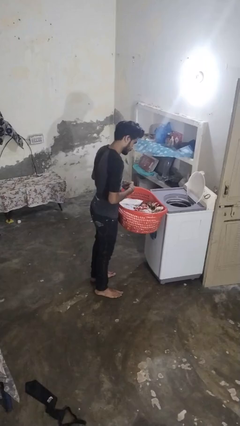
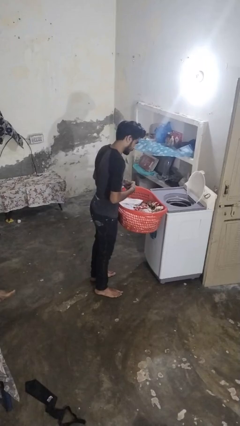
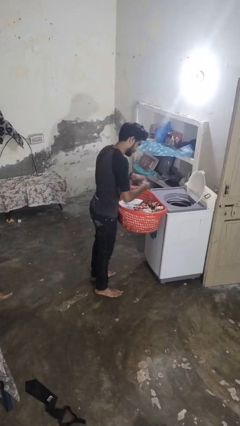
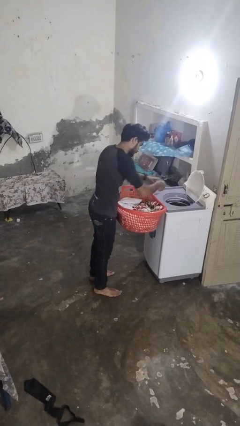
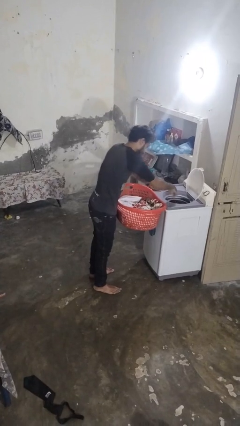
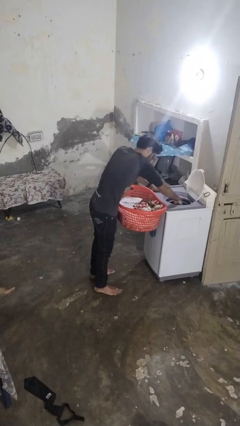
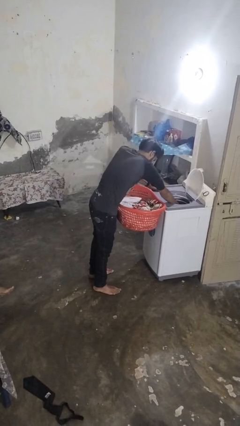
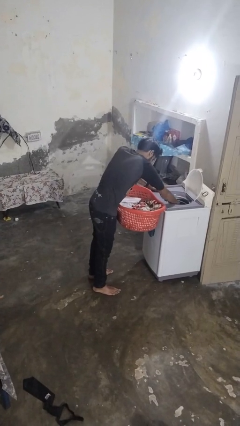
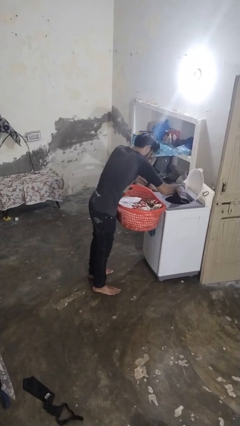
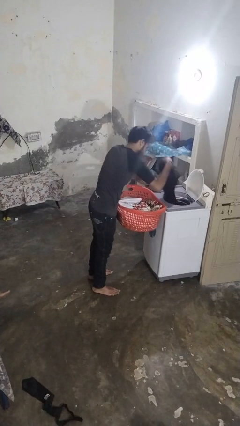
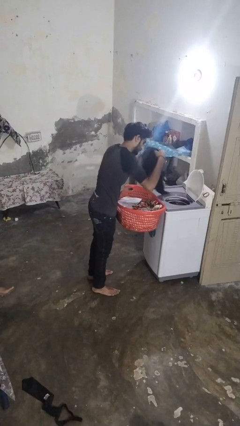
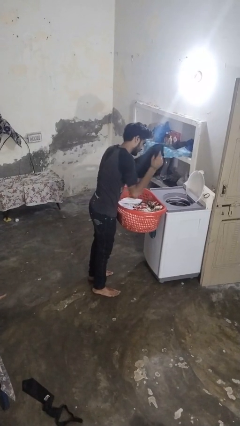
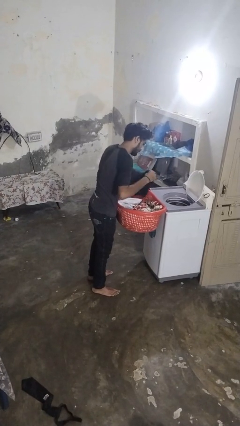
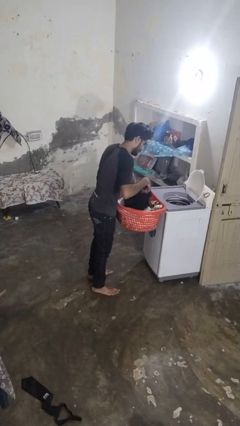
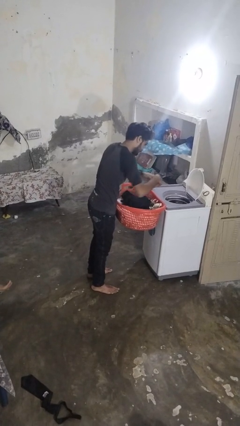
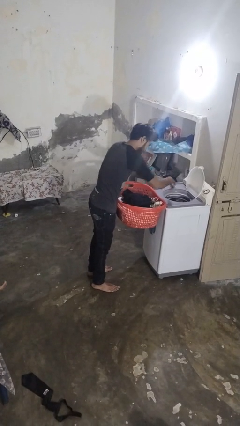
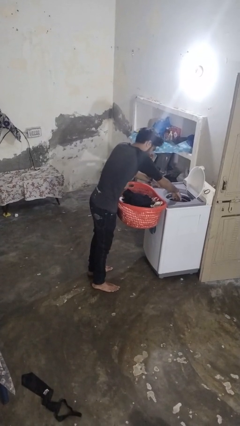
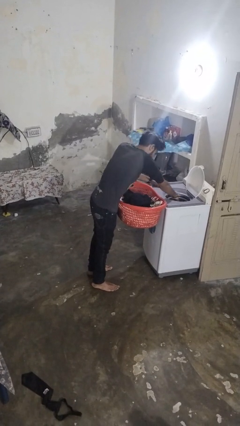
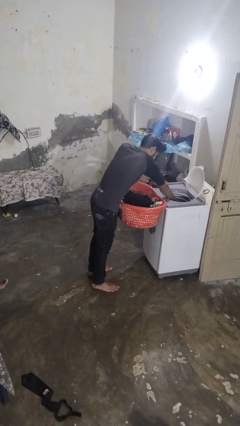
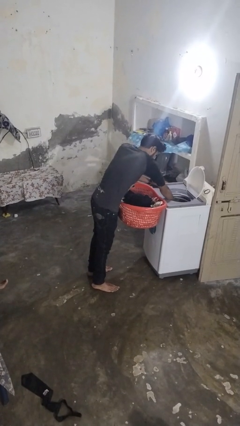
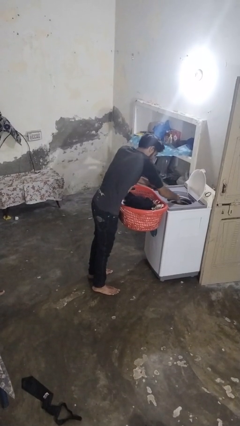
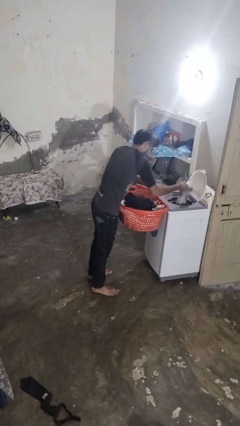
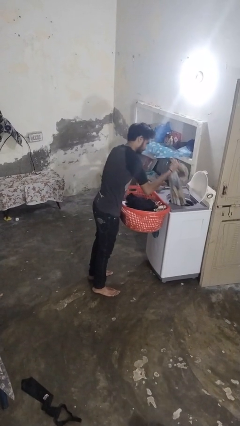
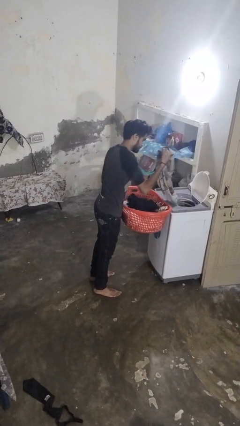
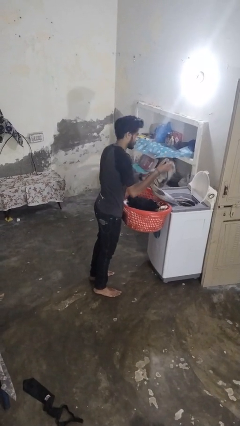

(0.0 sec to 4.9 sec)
person unloads dryer

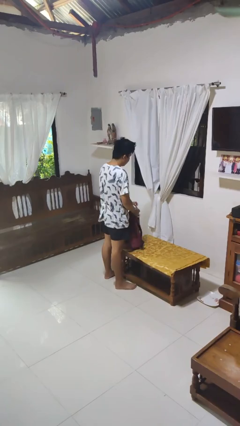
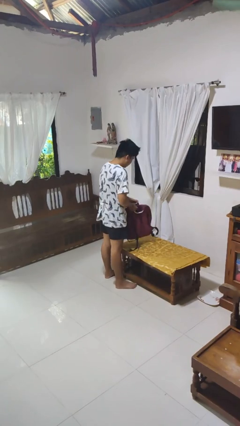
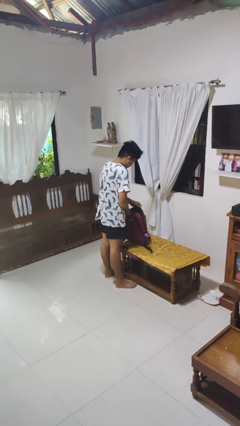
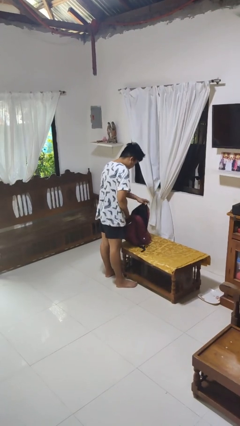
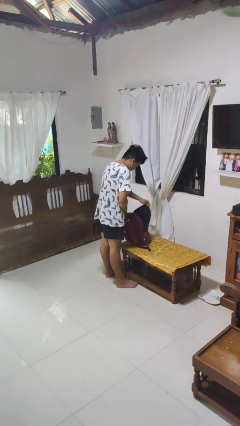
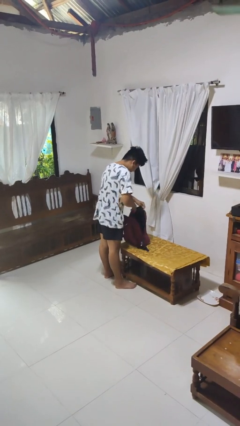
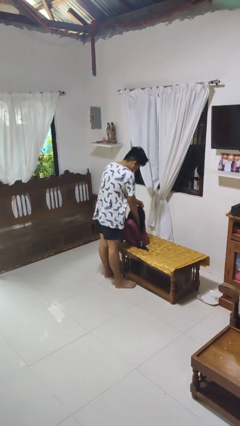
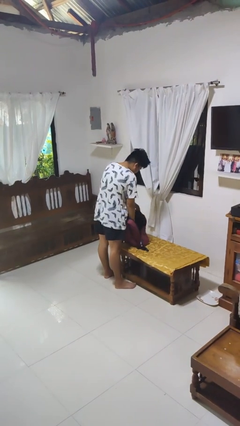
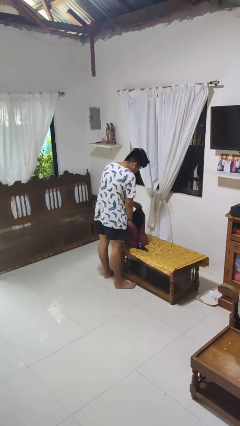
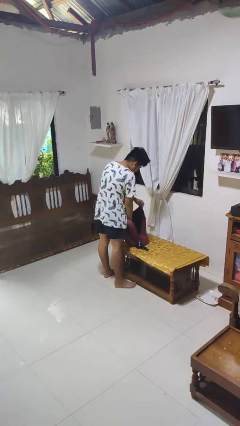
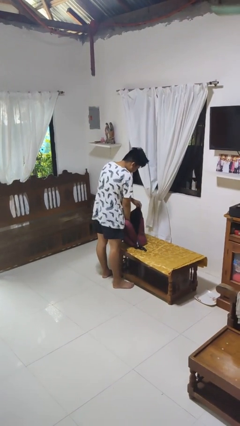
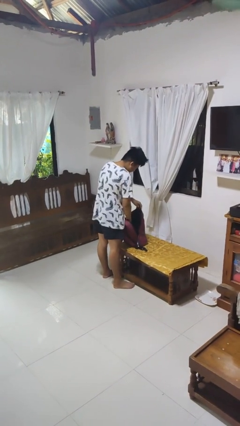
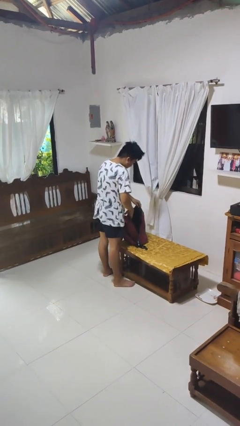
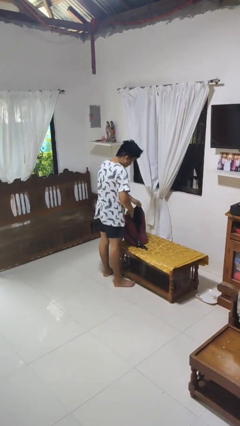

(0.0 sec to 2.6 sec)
person searches in bag

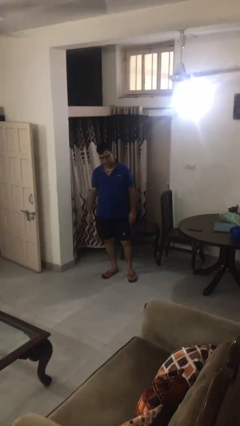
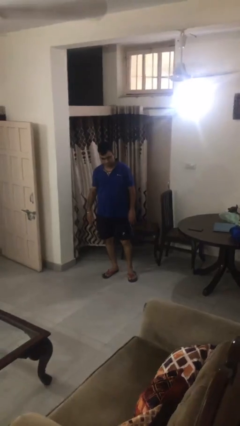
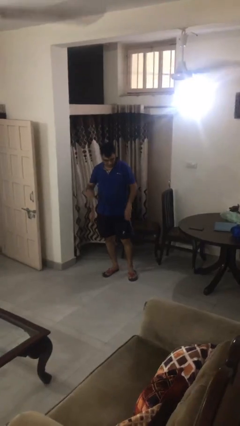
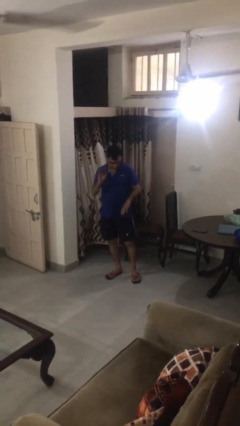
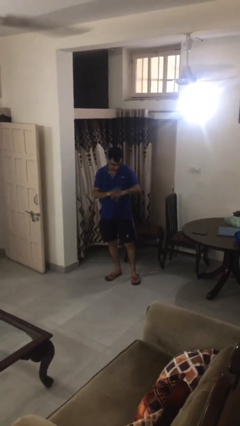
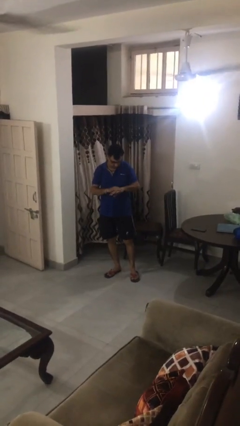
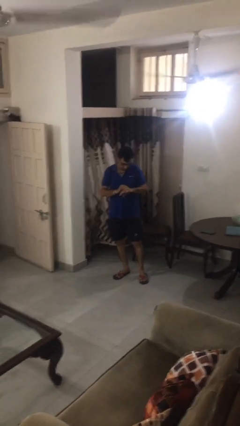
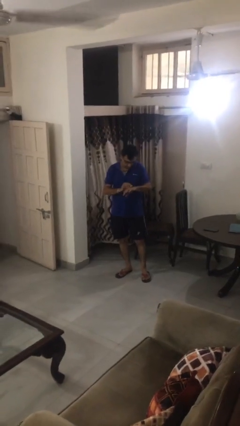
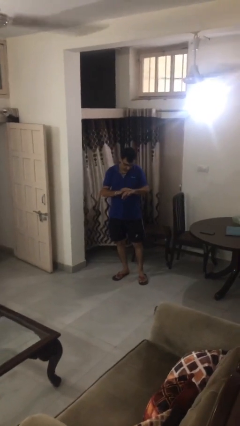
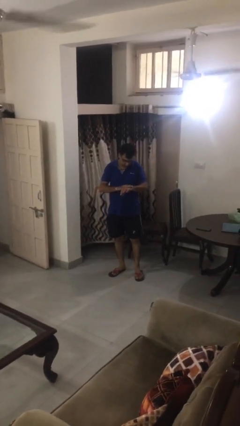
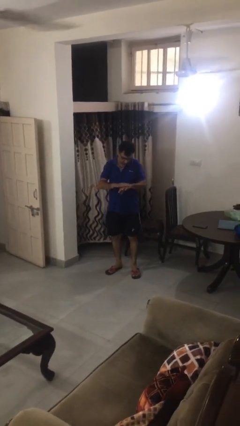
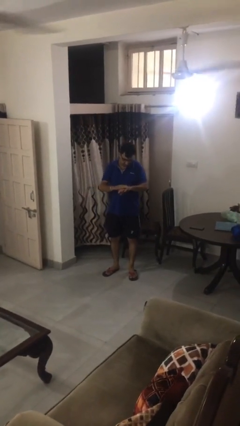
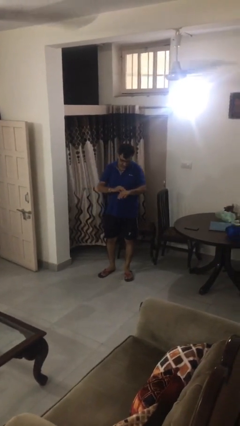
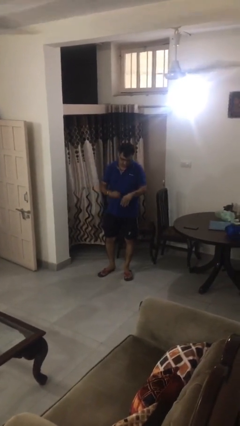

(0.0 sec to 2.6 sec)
person swats bug

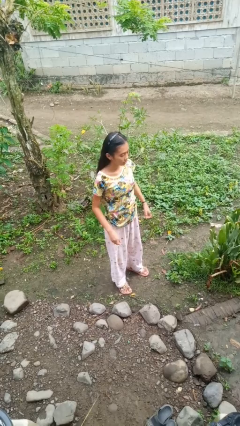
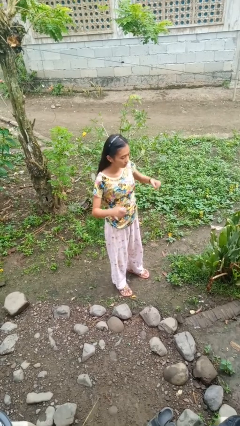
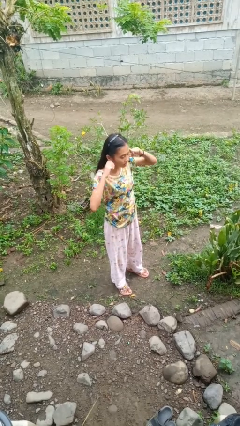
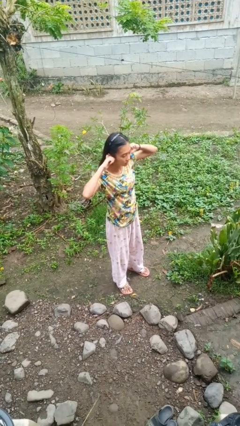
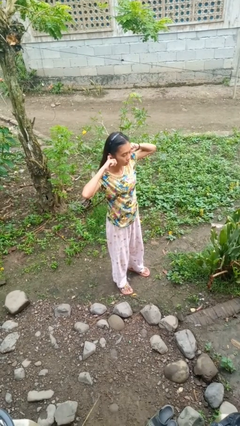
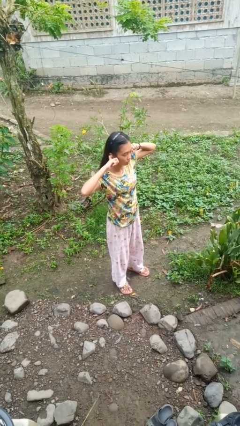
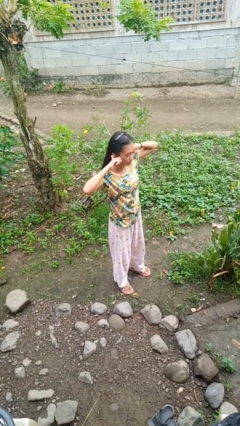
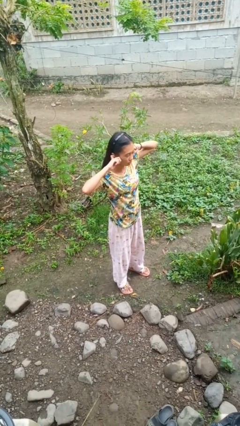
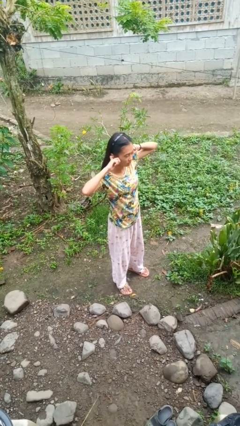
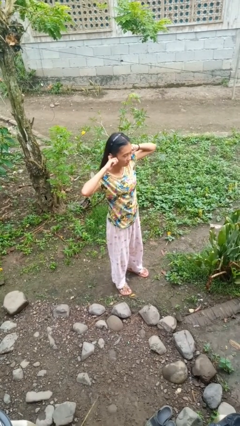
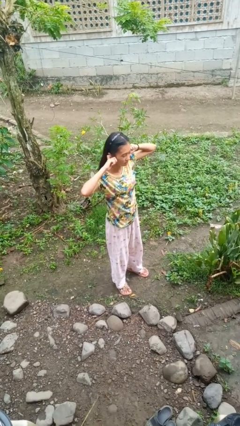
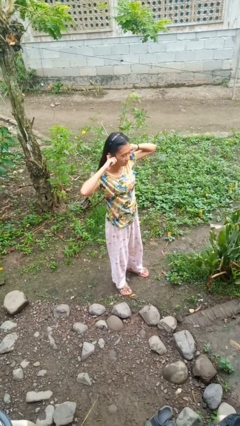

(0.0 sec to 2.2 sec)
person puts fingers in ear

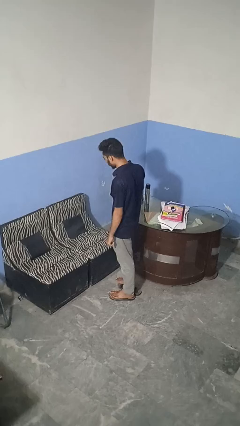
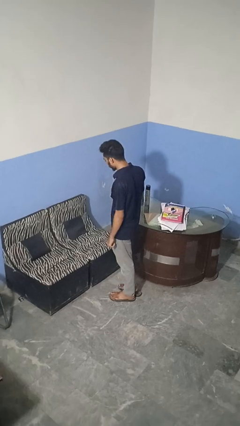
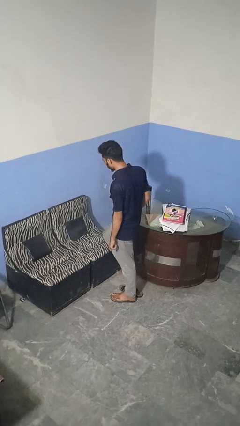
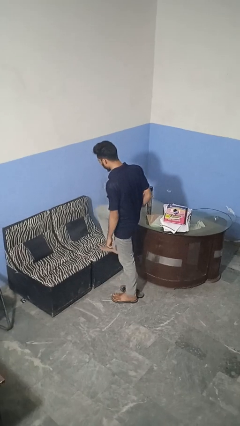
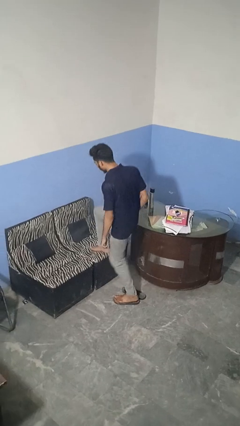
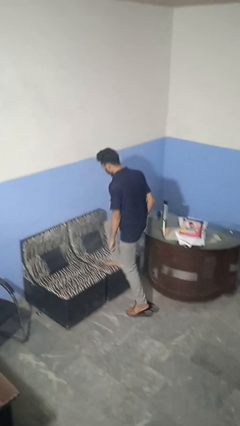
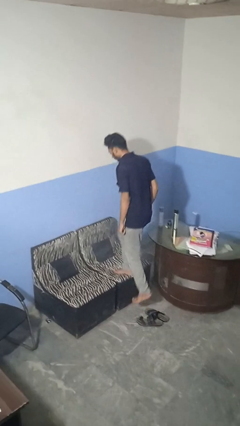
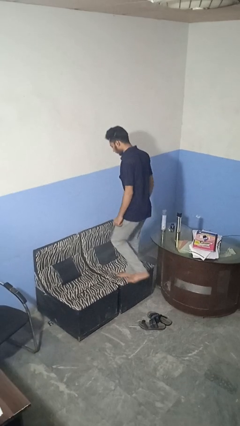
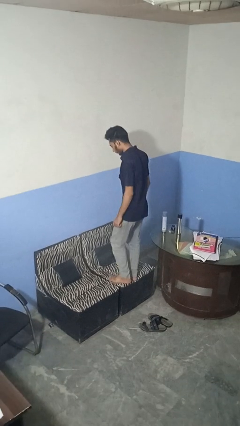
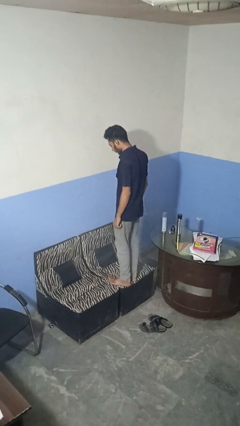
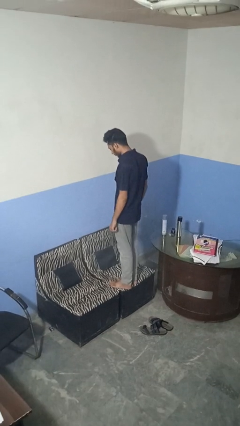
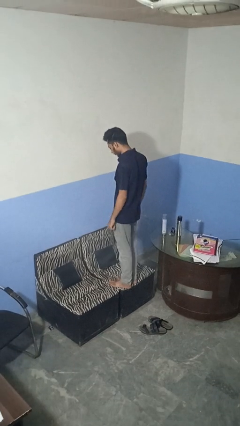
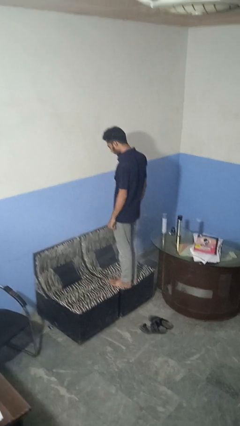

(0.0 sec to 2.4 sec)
person climbs on couch

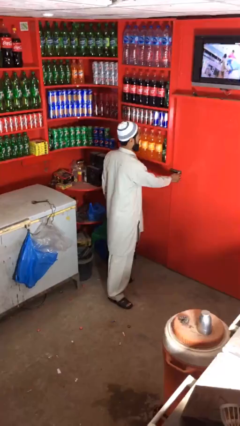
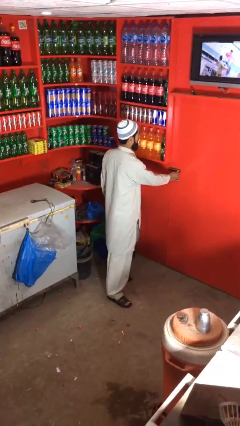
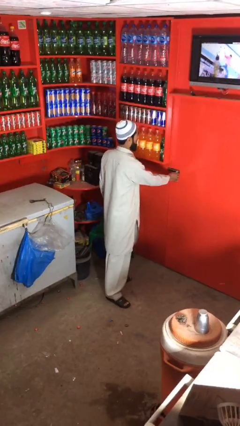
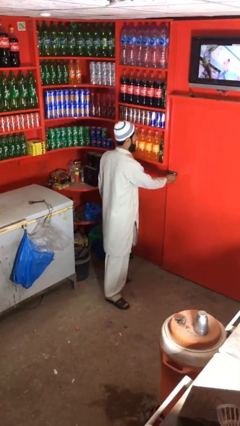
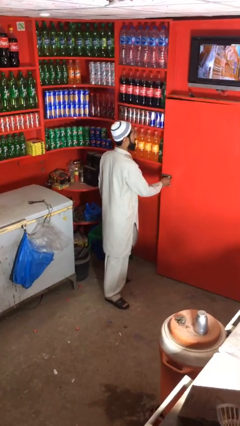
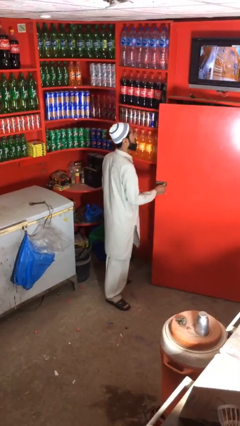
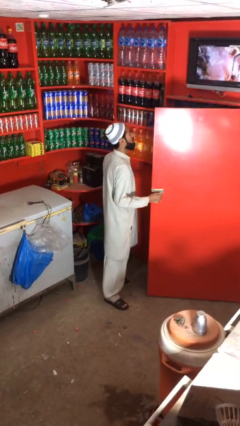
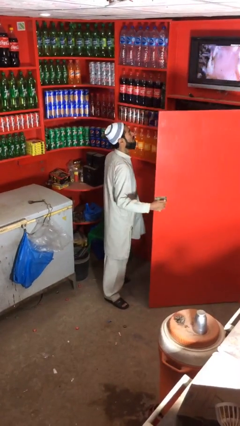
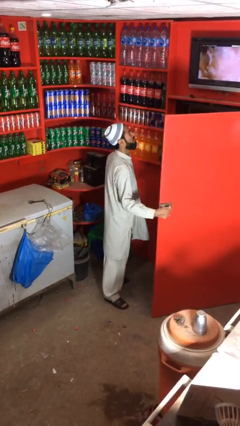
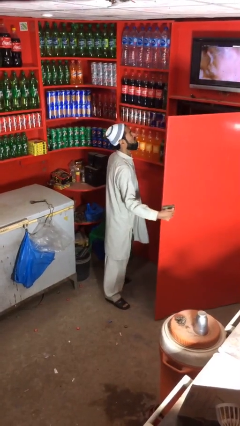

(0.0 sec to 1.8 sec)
person opens facility door

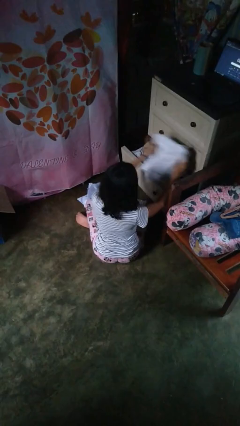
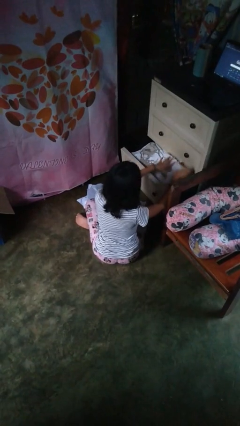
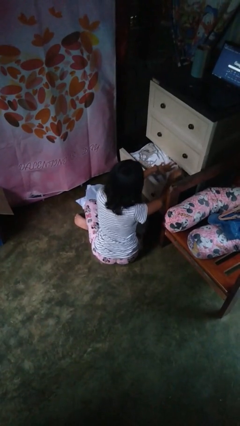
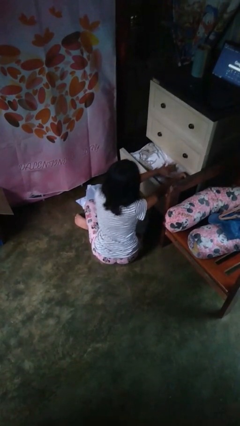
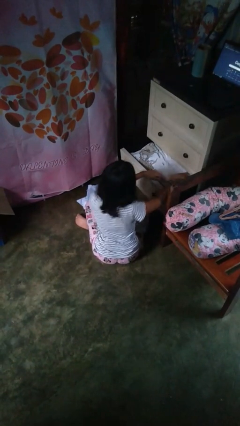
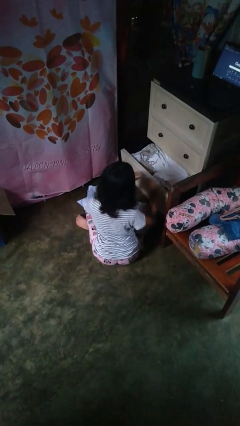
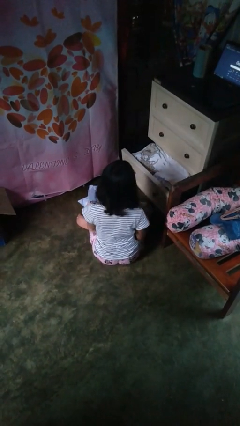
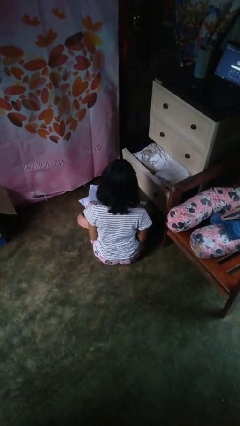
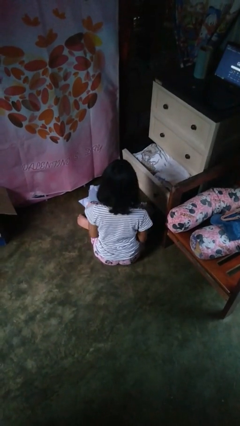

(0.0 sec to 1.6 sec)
person puts clothes into dresser
